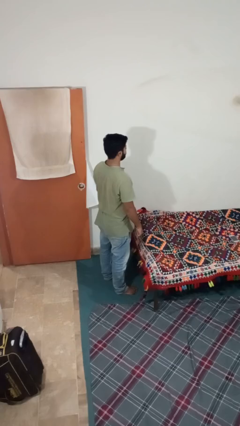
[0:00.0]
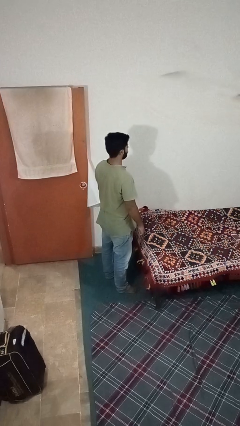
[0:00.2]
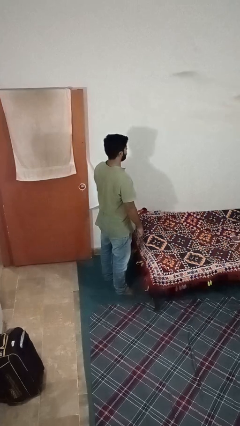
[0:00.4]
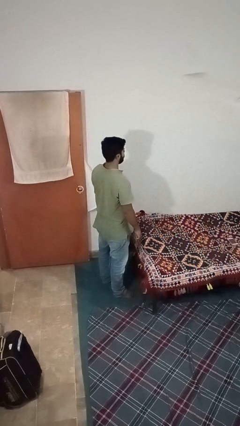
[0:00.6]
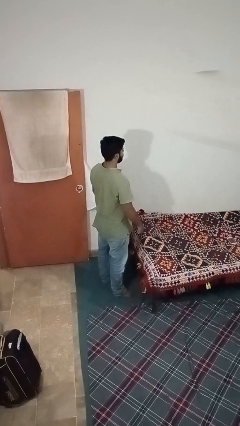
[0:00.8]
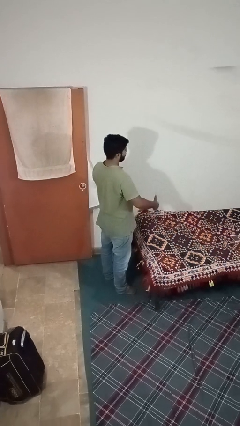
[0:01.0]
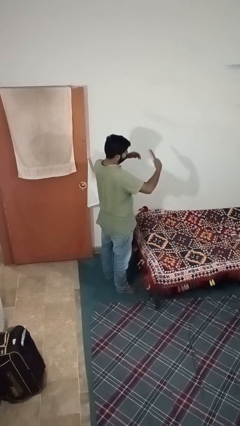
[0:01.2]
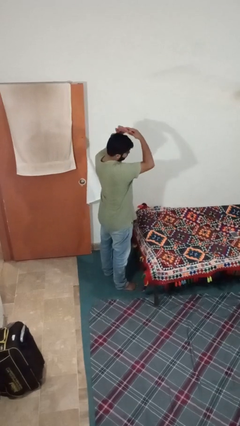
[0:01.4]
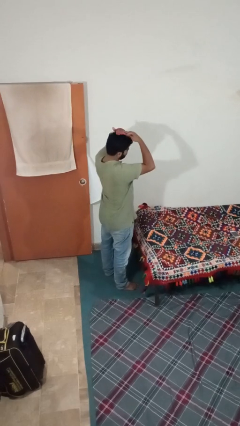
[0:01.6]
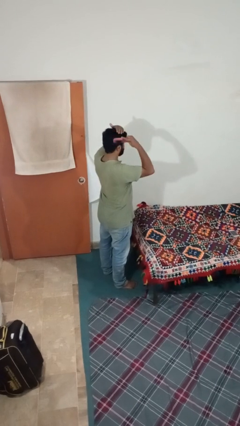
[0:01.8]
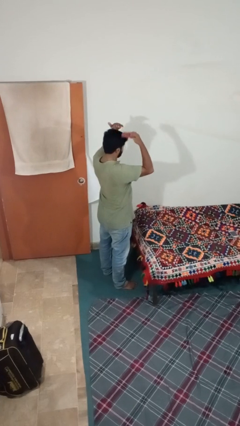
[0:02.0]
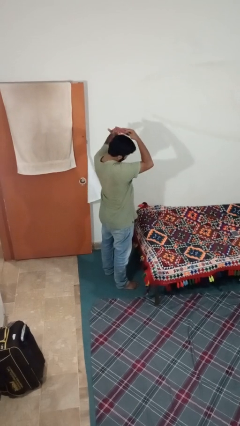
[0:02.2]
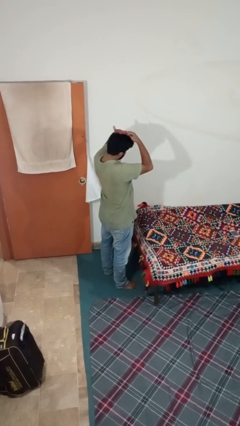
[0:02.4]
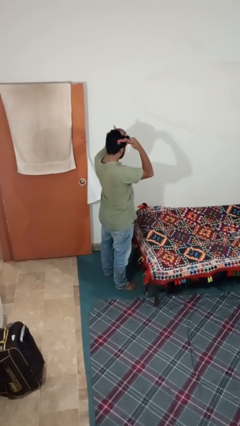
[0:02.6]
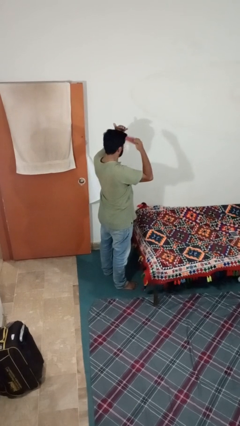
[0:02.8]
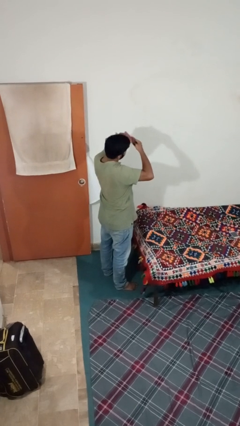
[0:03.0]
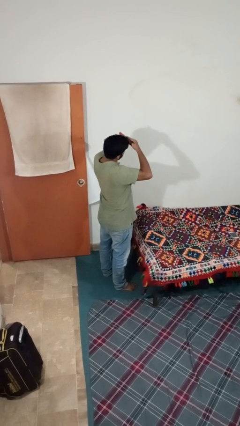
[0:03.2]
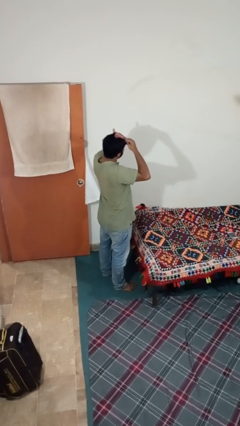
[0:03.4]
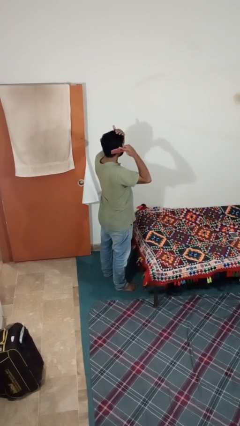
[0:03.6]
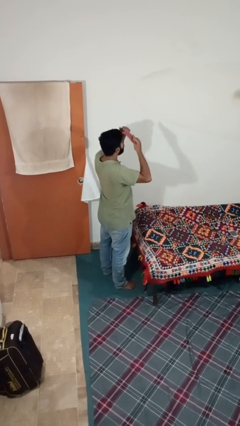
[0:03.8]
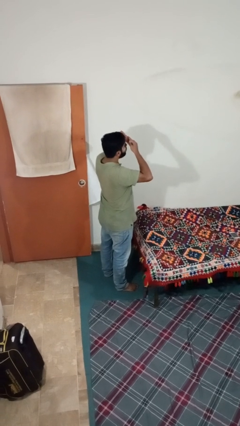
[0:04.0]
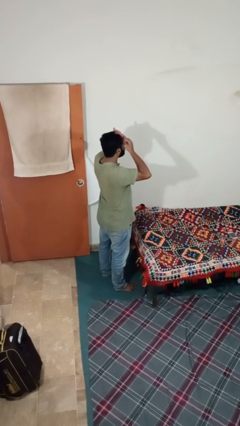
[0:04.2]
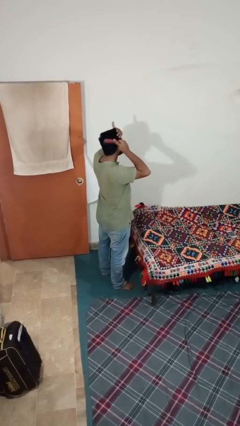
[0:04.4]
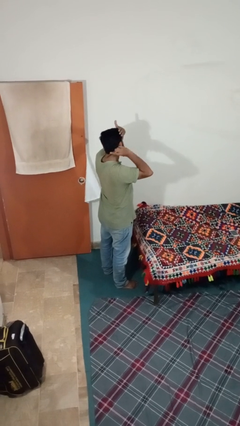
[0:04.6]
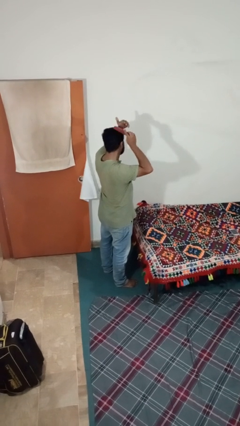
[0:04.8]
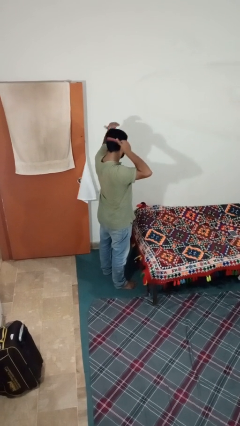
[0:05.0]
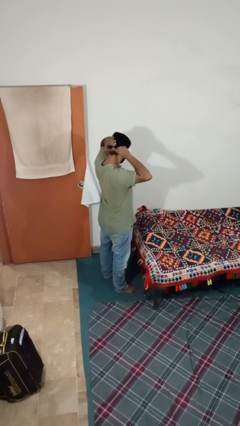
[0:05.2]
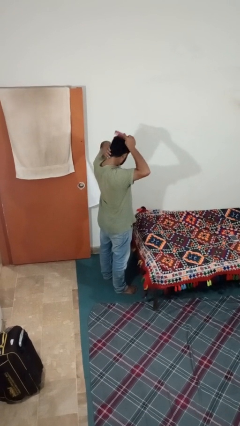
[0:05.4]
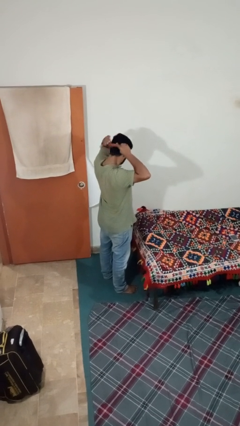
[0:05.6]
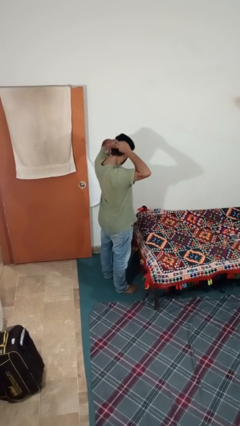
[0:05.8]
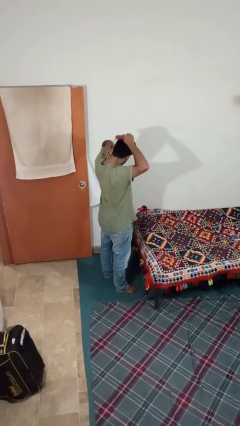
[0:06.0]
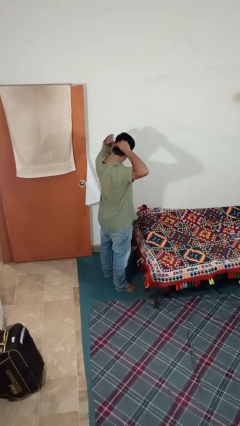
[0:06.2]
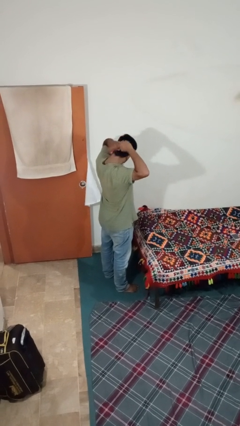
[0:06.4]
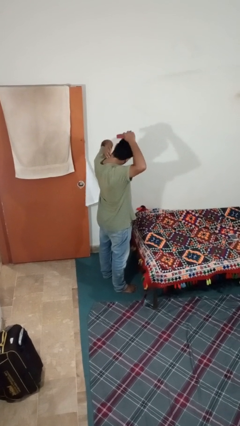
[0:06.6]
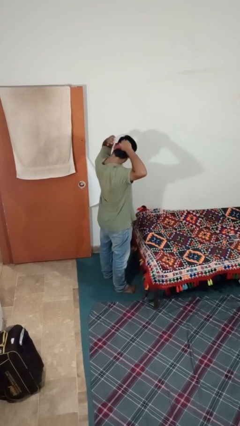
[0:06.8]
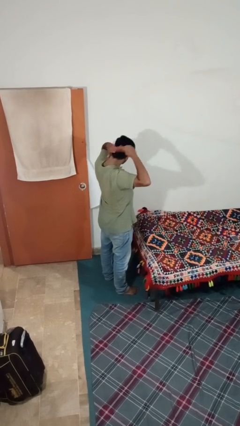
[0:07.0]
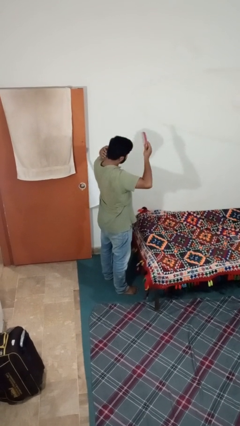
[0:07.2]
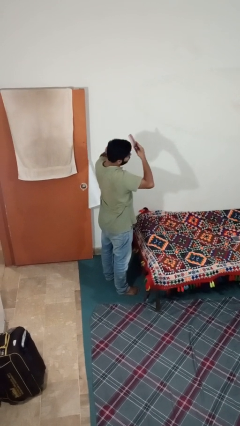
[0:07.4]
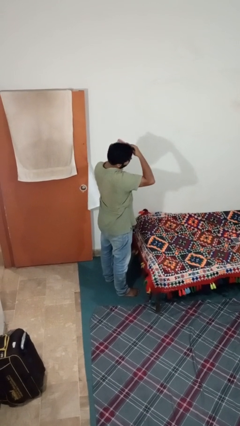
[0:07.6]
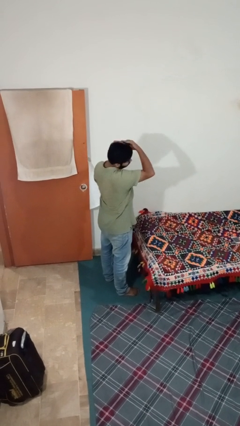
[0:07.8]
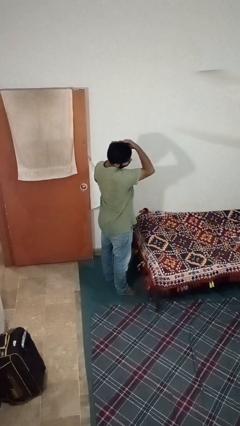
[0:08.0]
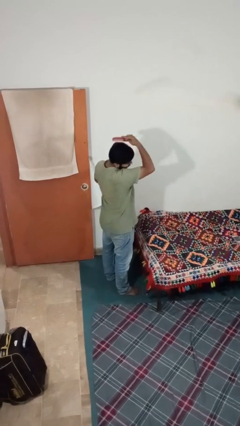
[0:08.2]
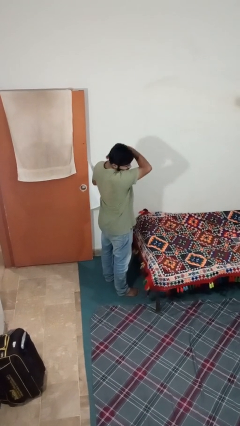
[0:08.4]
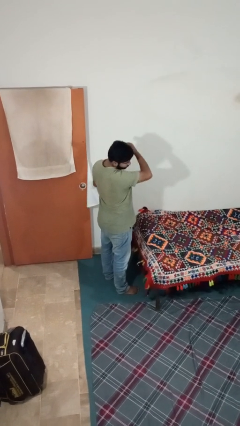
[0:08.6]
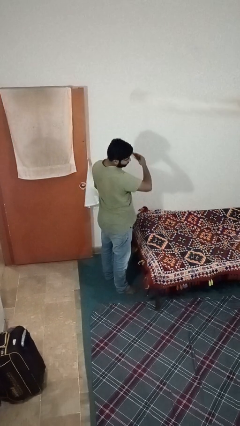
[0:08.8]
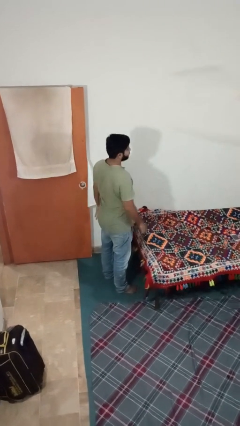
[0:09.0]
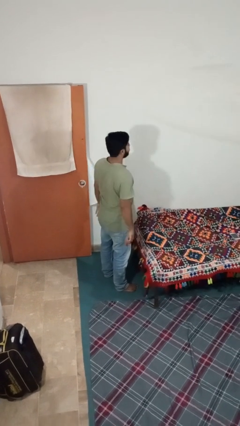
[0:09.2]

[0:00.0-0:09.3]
person brushes hair

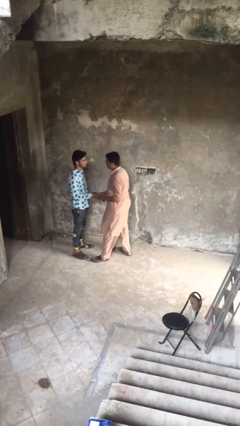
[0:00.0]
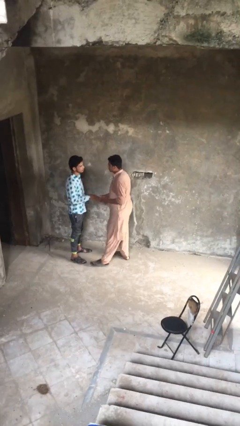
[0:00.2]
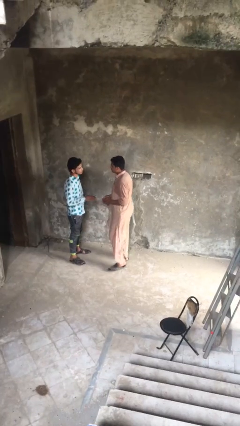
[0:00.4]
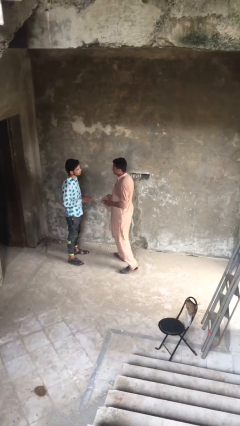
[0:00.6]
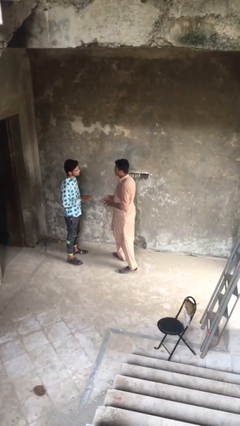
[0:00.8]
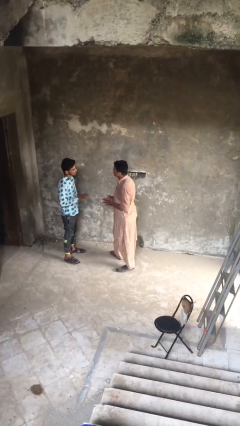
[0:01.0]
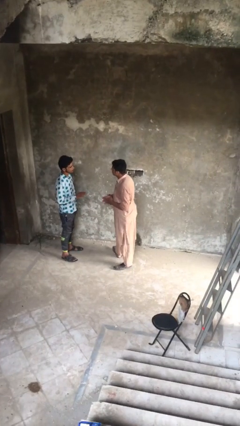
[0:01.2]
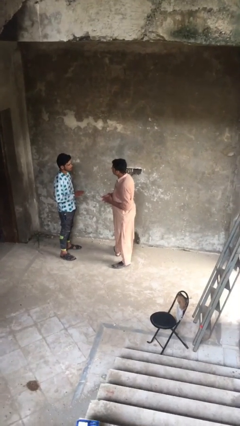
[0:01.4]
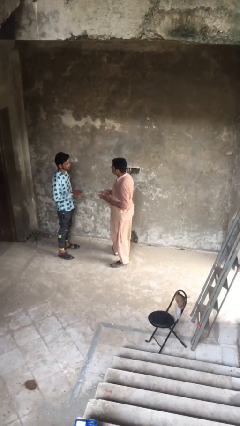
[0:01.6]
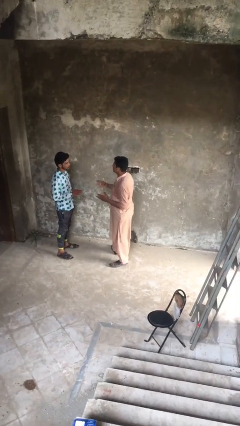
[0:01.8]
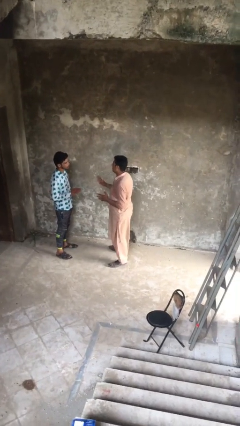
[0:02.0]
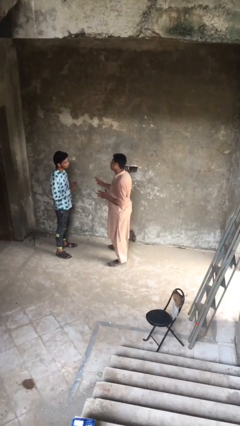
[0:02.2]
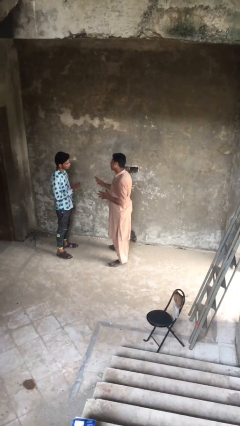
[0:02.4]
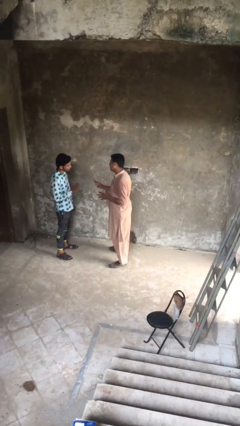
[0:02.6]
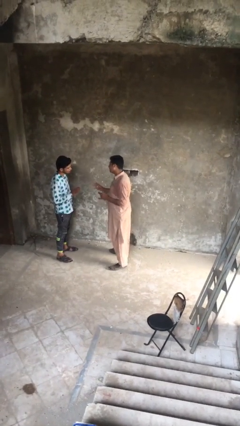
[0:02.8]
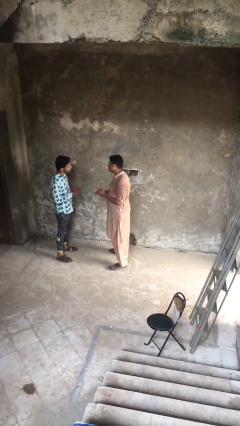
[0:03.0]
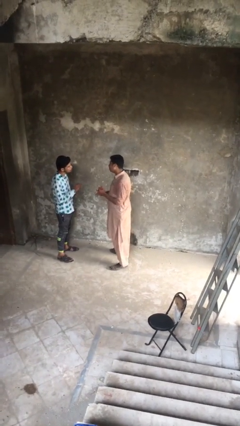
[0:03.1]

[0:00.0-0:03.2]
person talks to person

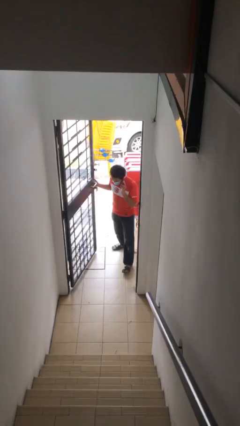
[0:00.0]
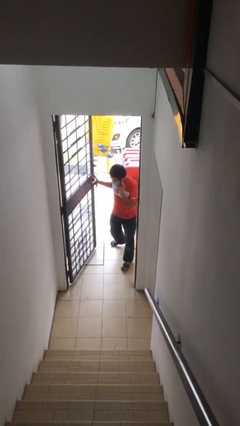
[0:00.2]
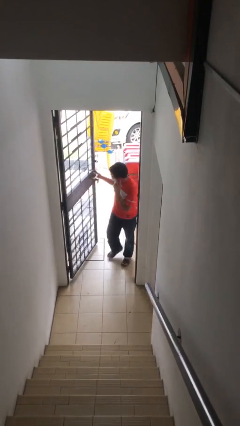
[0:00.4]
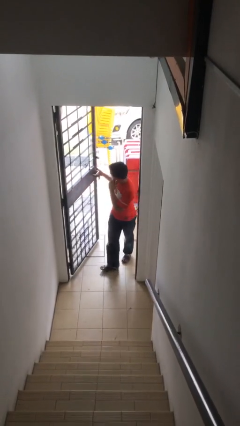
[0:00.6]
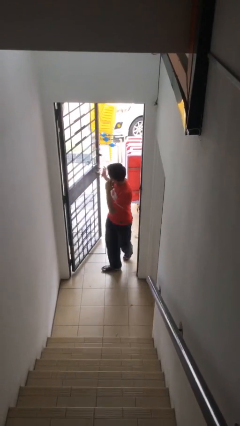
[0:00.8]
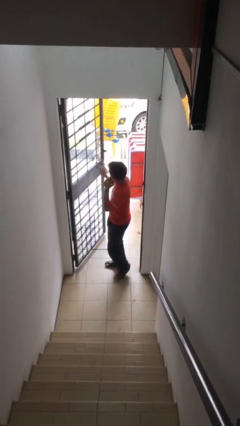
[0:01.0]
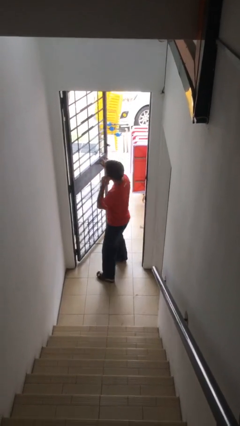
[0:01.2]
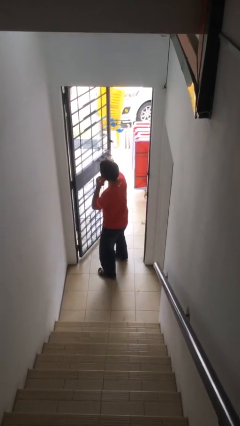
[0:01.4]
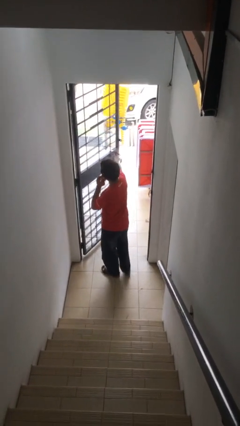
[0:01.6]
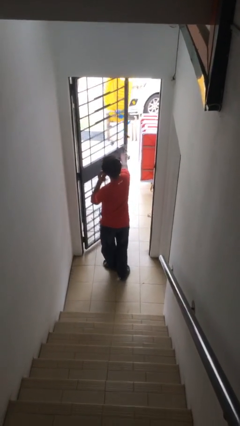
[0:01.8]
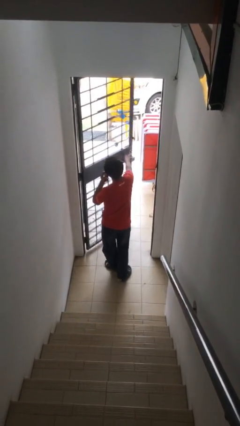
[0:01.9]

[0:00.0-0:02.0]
person enters scene through structure

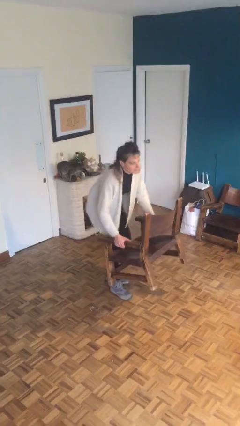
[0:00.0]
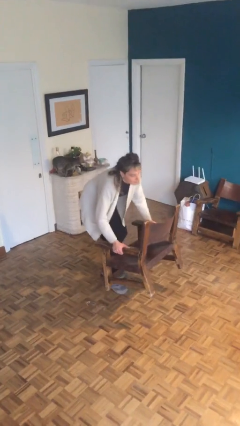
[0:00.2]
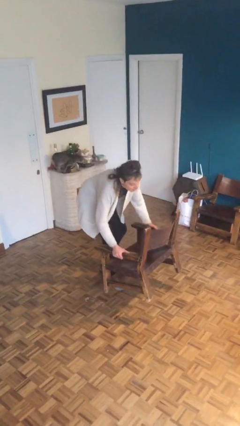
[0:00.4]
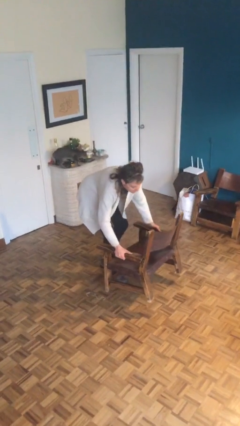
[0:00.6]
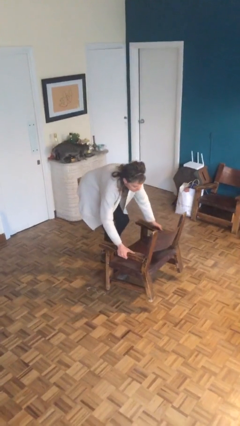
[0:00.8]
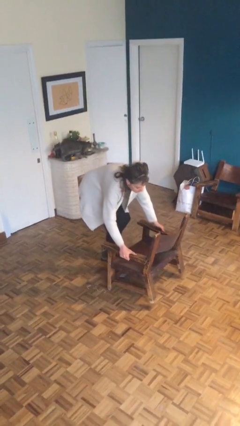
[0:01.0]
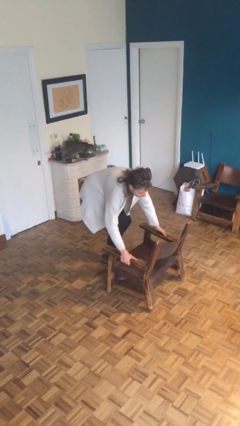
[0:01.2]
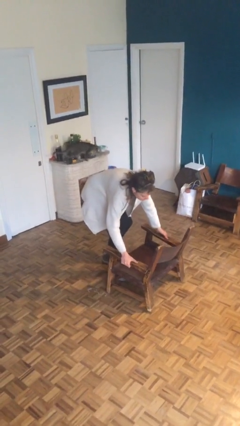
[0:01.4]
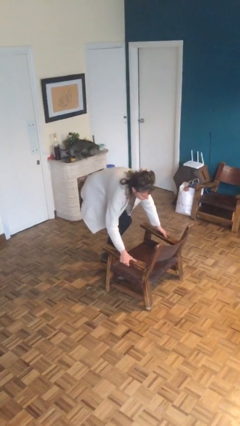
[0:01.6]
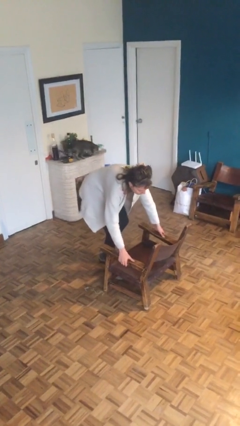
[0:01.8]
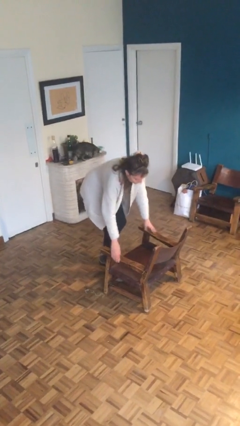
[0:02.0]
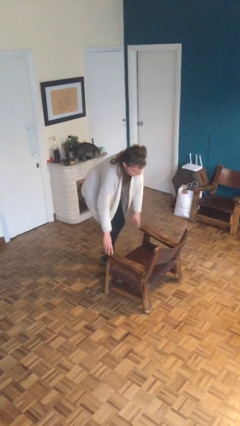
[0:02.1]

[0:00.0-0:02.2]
person puts down object on floor

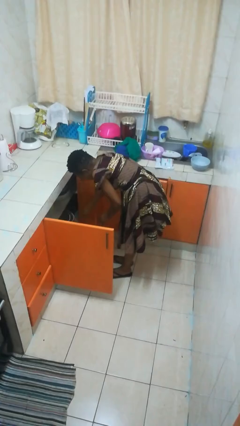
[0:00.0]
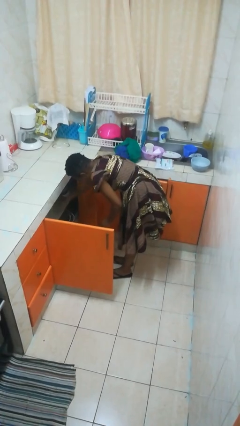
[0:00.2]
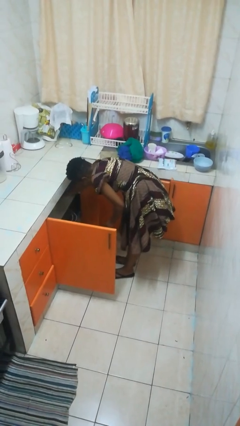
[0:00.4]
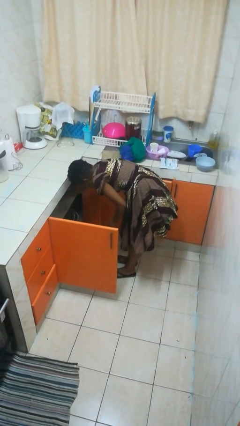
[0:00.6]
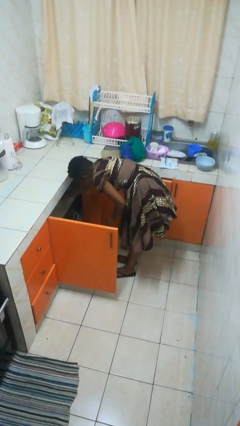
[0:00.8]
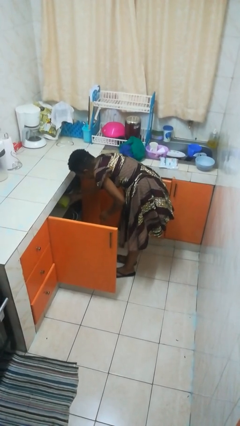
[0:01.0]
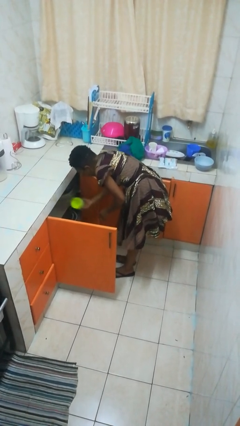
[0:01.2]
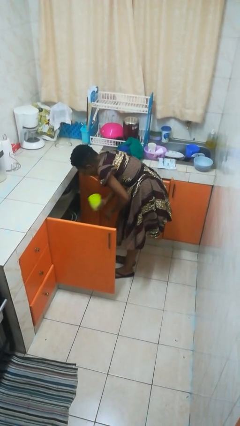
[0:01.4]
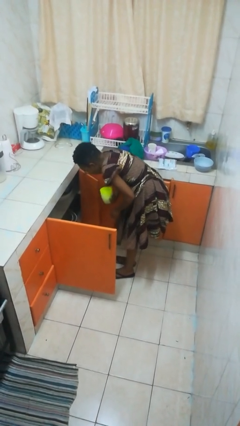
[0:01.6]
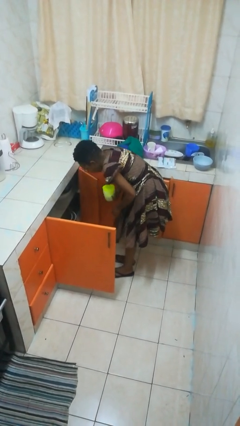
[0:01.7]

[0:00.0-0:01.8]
person takes object from cabinet
